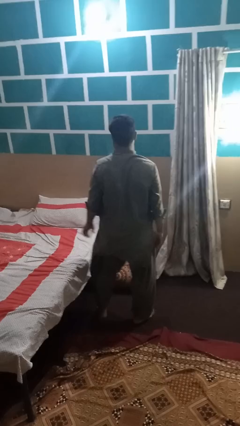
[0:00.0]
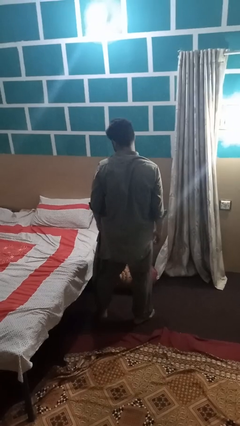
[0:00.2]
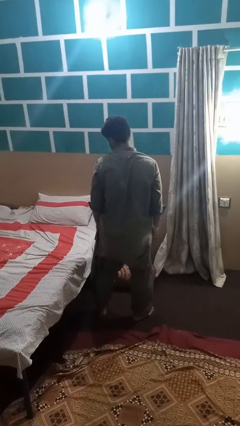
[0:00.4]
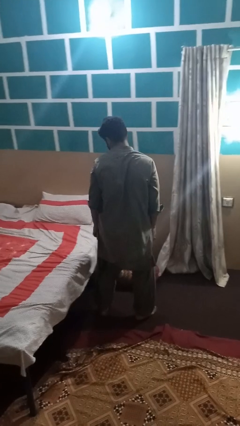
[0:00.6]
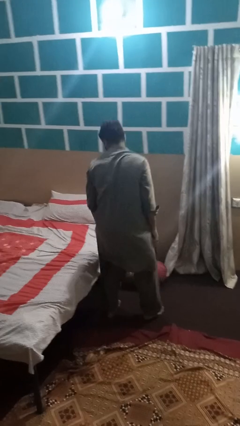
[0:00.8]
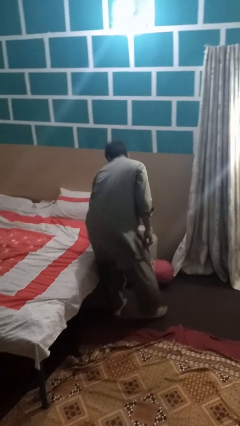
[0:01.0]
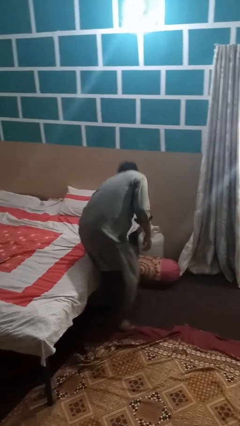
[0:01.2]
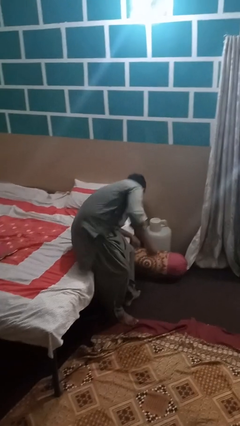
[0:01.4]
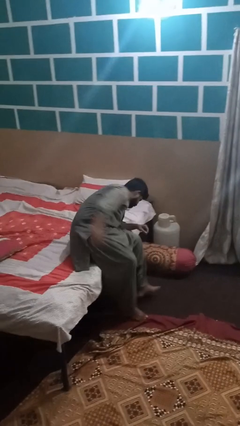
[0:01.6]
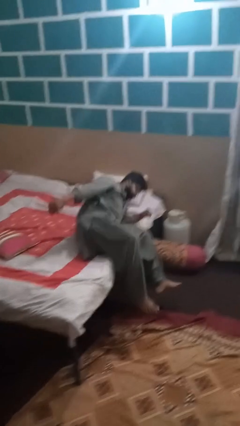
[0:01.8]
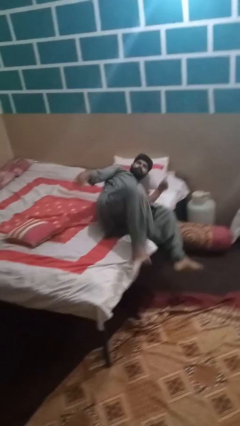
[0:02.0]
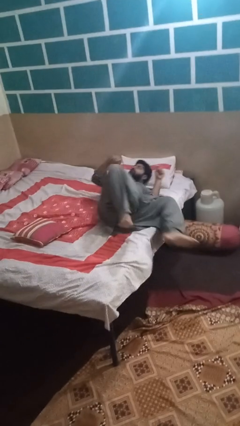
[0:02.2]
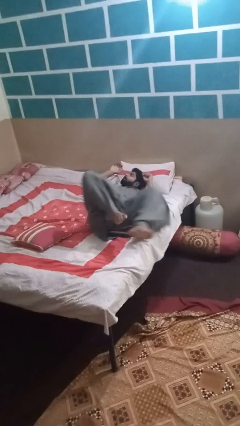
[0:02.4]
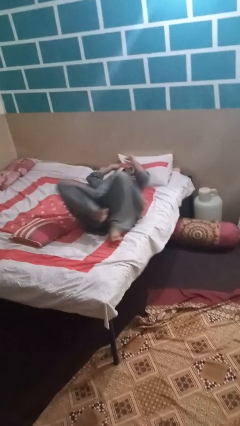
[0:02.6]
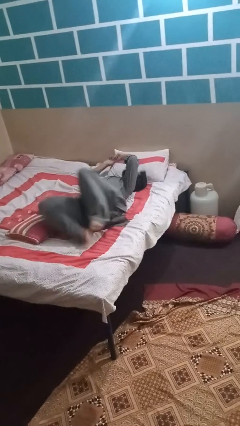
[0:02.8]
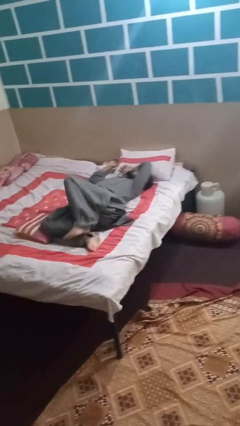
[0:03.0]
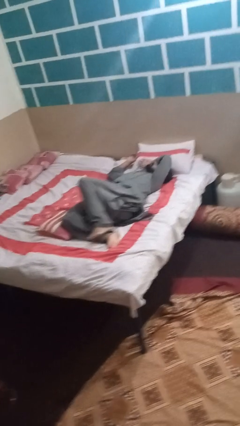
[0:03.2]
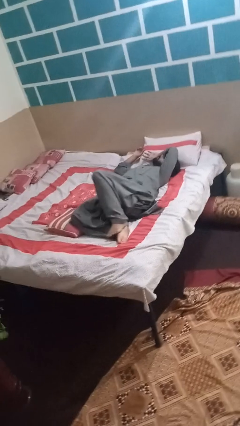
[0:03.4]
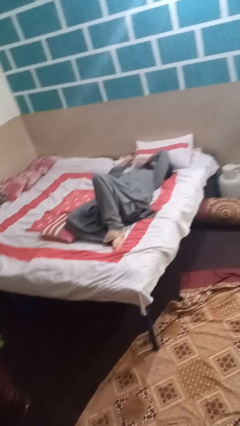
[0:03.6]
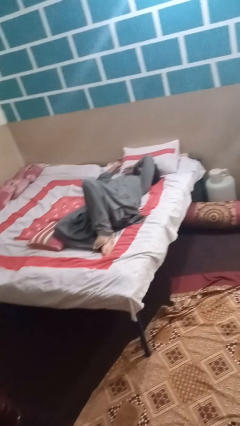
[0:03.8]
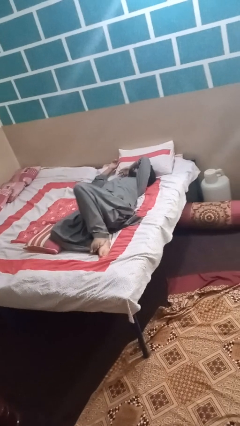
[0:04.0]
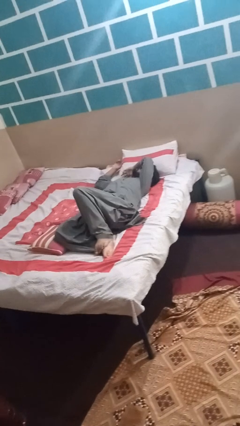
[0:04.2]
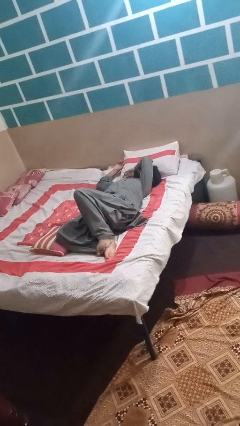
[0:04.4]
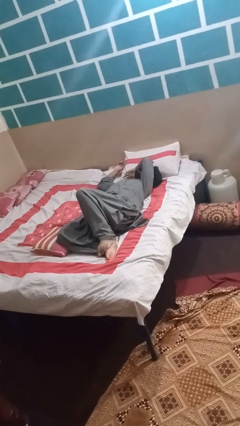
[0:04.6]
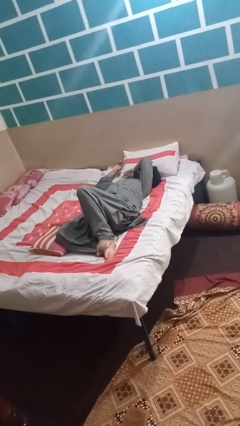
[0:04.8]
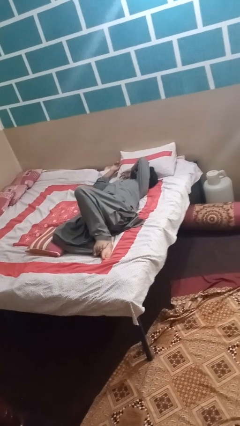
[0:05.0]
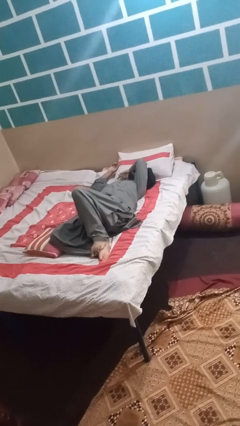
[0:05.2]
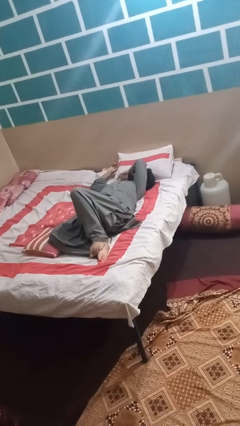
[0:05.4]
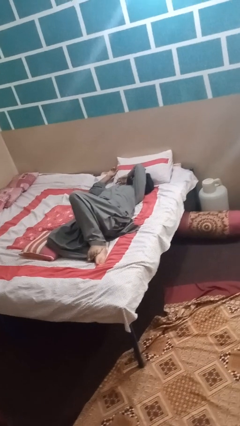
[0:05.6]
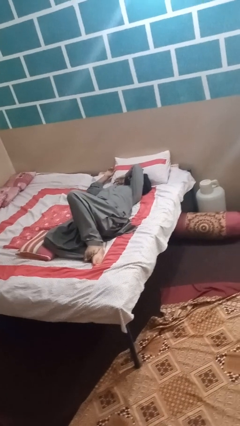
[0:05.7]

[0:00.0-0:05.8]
person lies down on bed

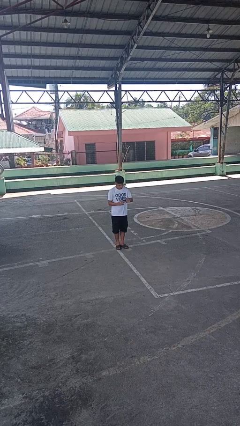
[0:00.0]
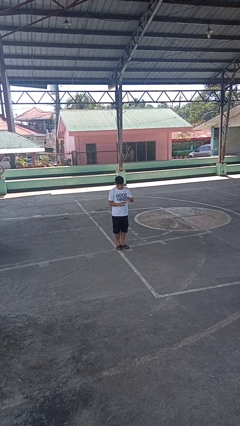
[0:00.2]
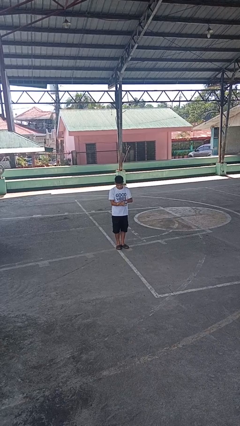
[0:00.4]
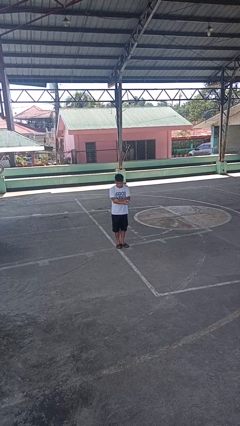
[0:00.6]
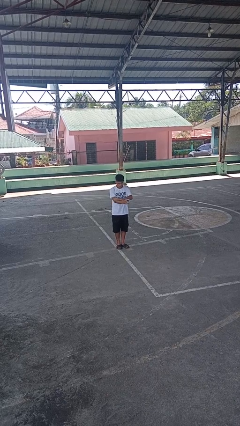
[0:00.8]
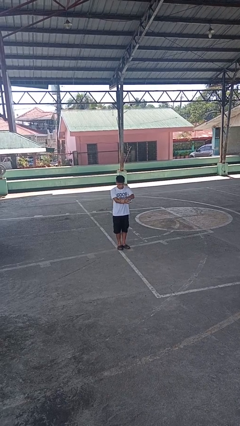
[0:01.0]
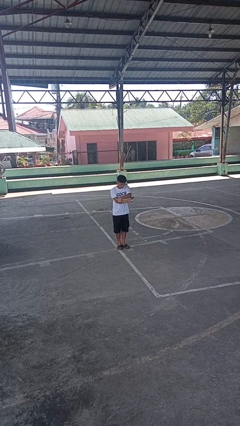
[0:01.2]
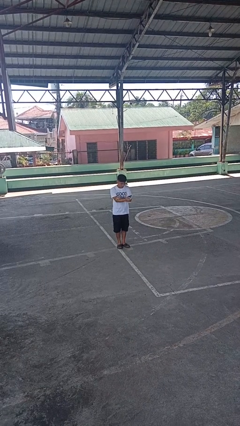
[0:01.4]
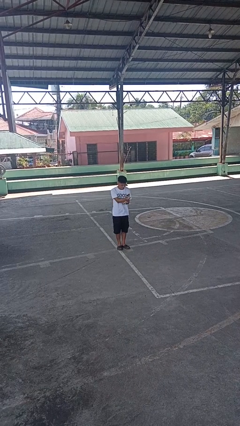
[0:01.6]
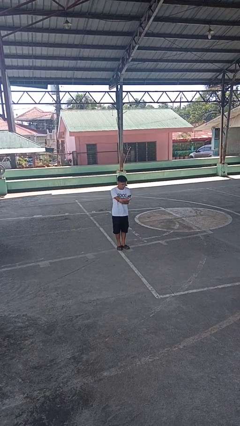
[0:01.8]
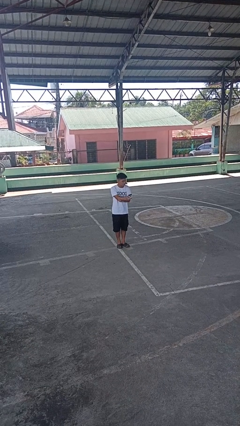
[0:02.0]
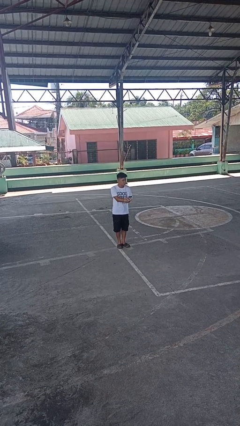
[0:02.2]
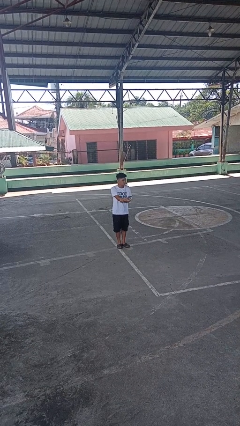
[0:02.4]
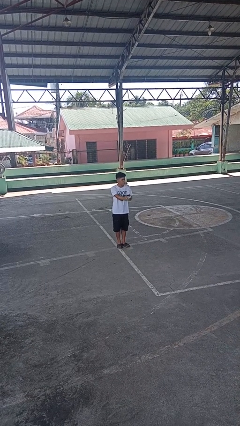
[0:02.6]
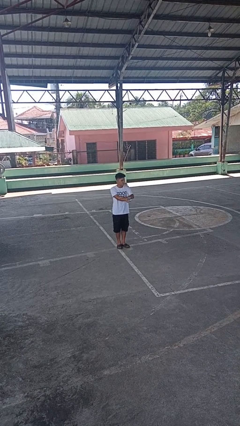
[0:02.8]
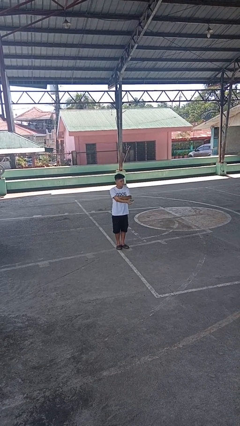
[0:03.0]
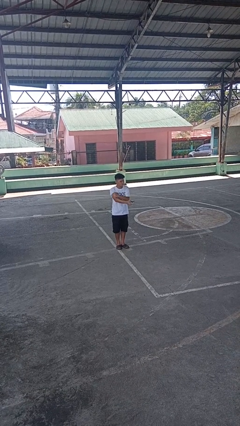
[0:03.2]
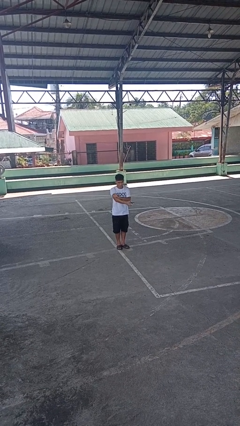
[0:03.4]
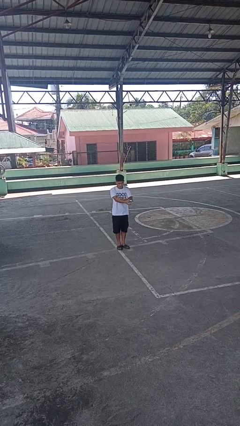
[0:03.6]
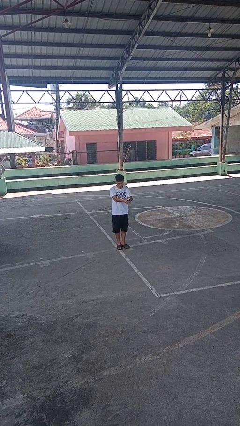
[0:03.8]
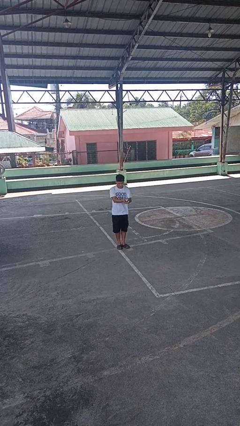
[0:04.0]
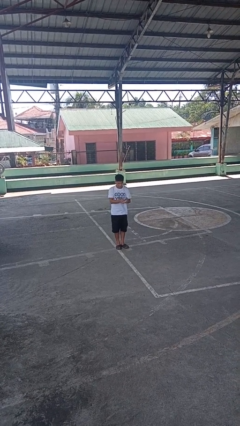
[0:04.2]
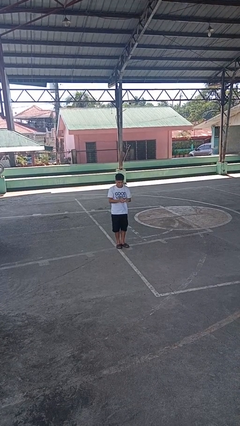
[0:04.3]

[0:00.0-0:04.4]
person applies sunscreen

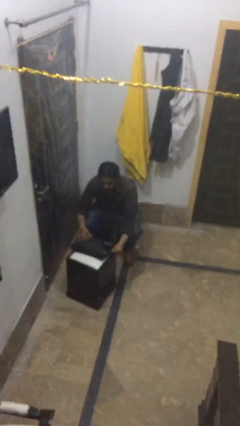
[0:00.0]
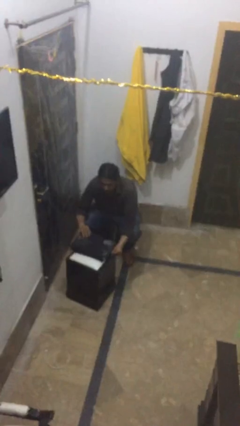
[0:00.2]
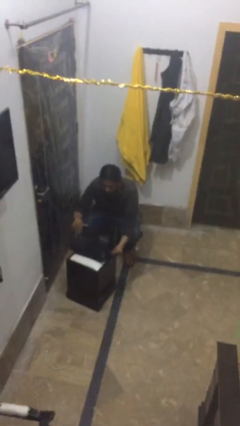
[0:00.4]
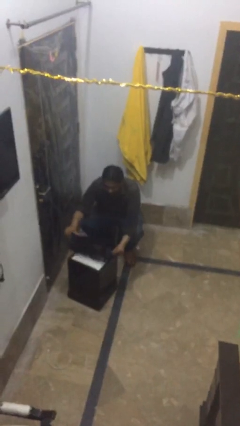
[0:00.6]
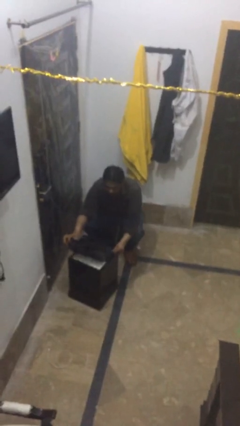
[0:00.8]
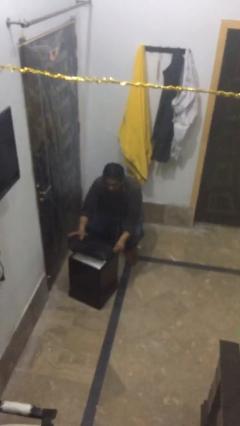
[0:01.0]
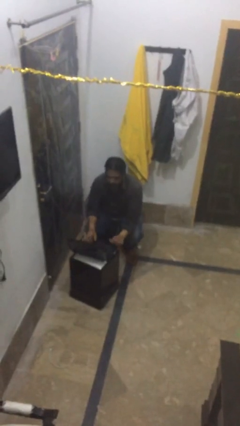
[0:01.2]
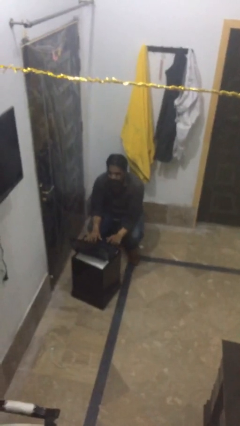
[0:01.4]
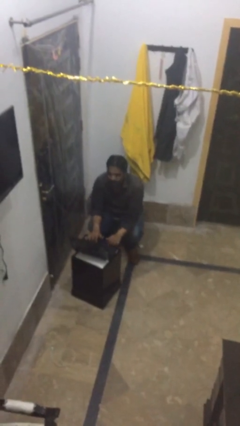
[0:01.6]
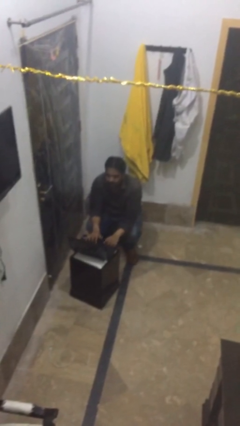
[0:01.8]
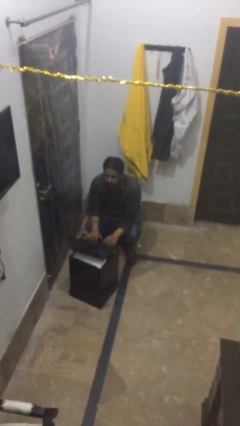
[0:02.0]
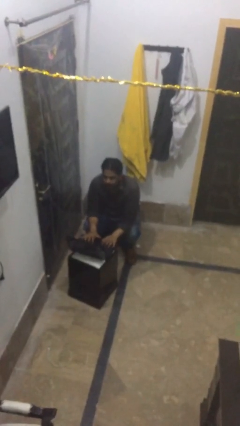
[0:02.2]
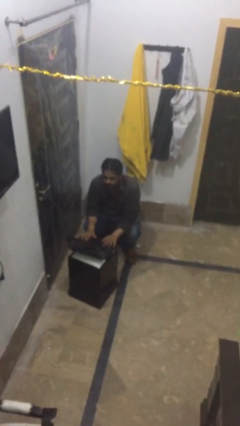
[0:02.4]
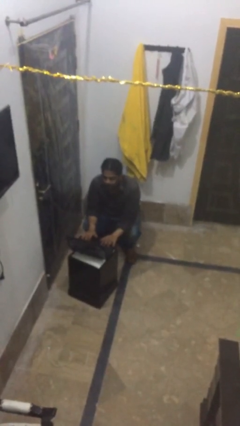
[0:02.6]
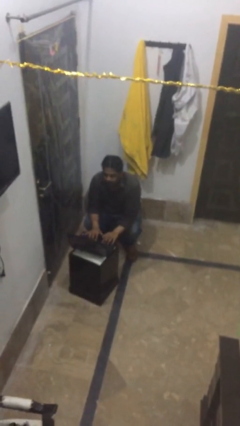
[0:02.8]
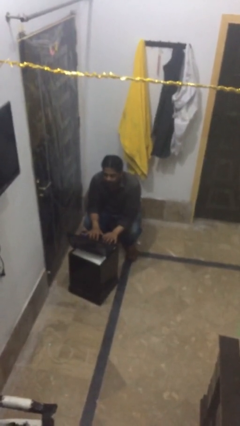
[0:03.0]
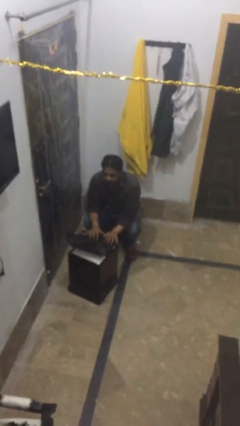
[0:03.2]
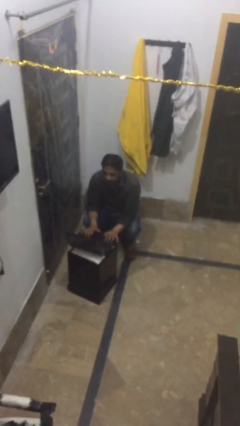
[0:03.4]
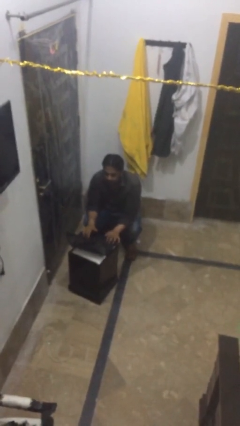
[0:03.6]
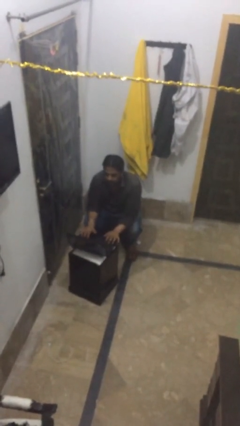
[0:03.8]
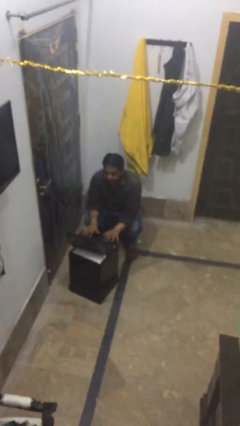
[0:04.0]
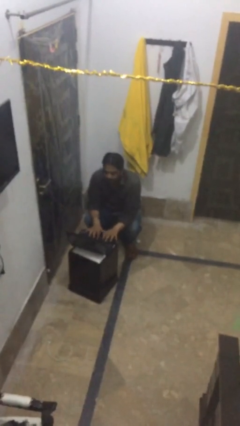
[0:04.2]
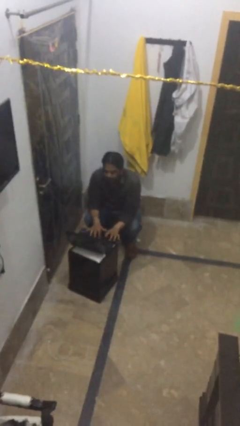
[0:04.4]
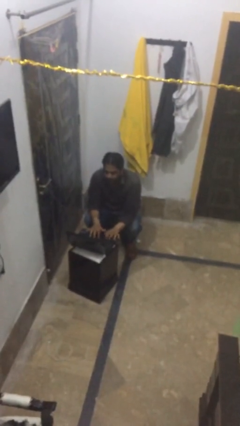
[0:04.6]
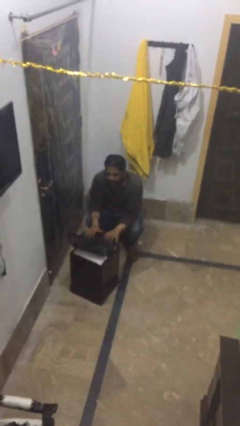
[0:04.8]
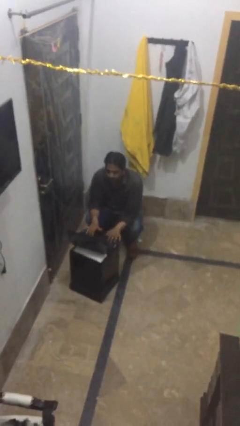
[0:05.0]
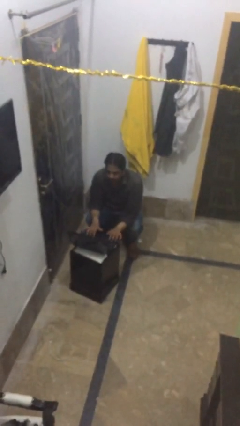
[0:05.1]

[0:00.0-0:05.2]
person interacts with laptop

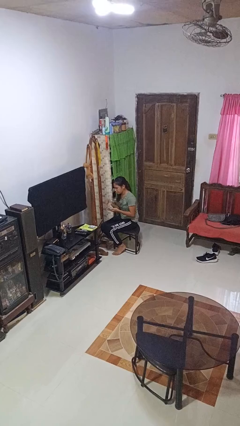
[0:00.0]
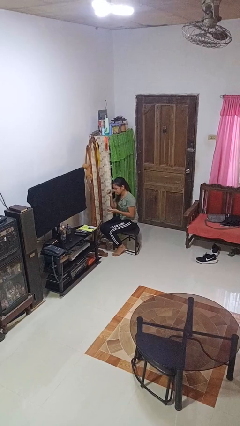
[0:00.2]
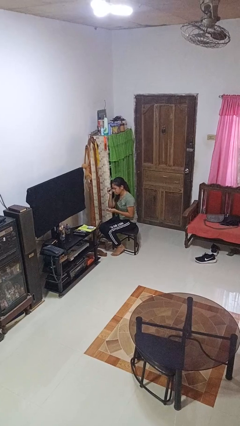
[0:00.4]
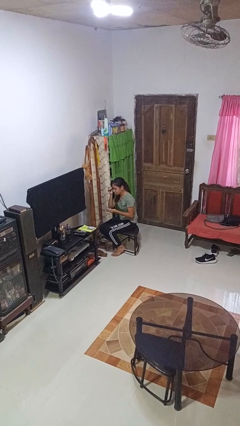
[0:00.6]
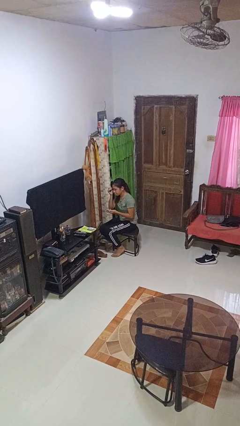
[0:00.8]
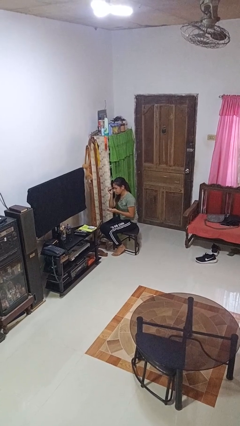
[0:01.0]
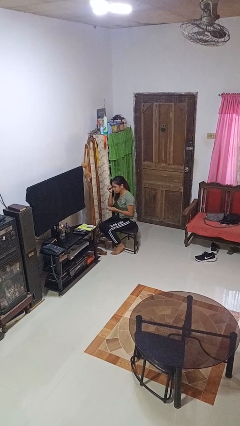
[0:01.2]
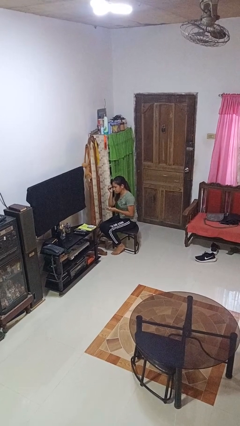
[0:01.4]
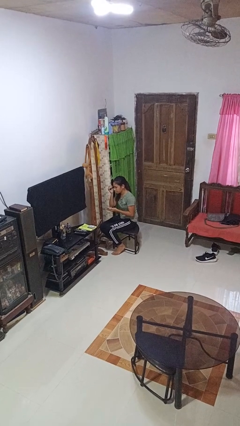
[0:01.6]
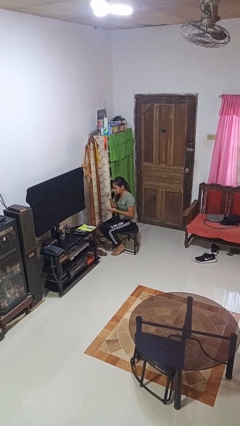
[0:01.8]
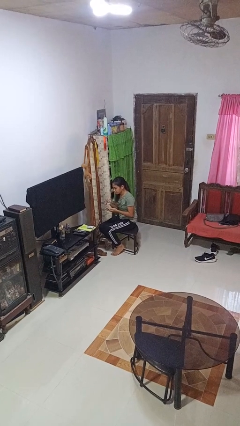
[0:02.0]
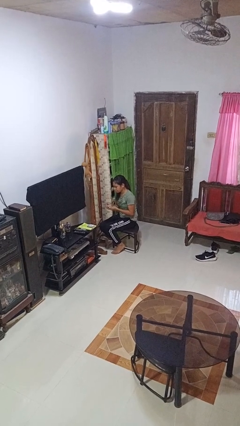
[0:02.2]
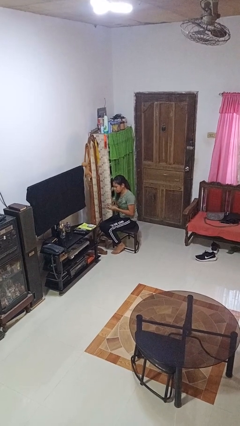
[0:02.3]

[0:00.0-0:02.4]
person applies eye makeup

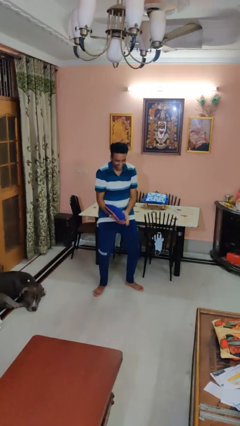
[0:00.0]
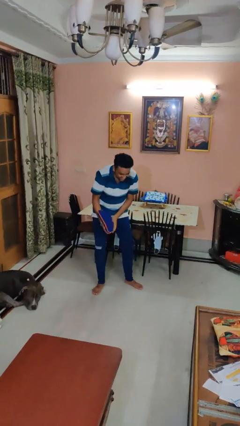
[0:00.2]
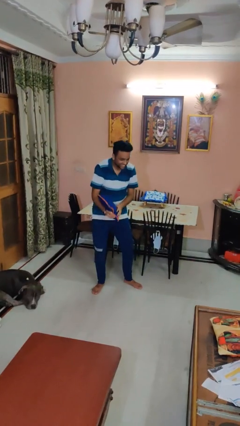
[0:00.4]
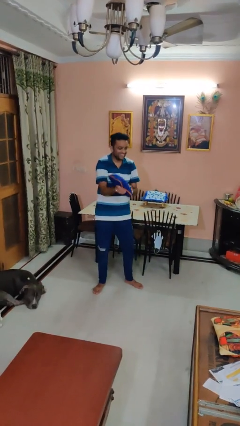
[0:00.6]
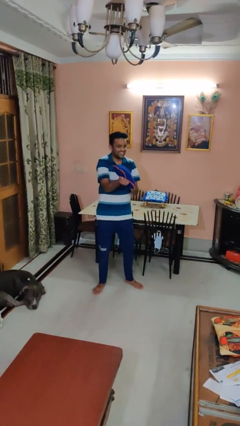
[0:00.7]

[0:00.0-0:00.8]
person catches dropped object
